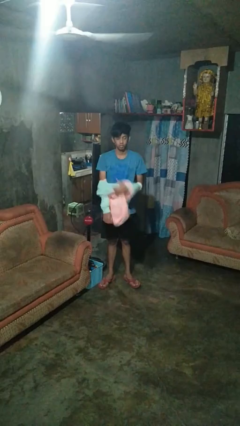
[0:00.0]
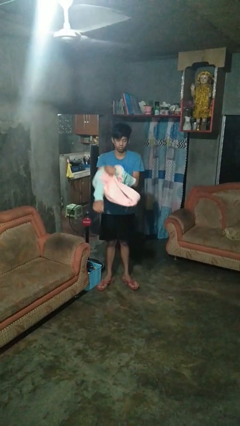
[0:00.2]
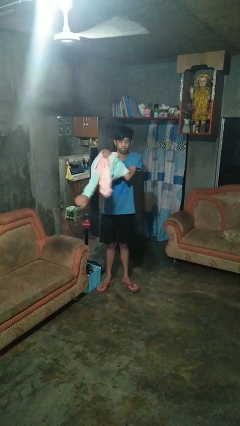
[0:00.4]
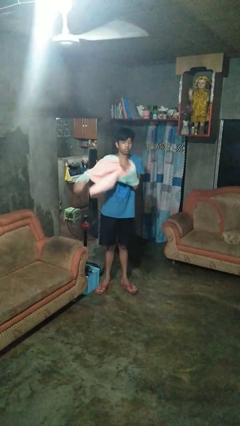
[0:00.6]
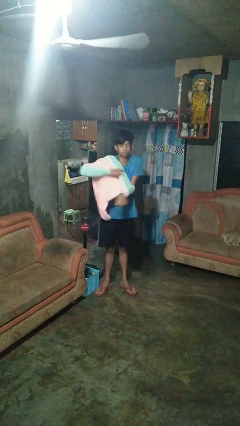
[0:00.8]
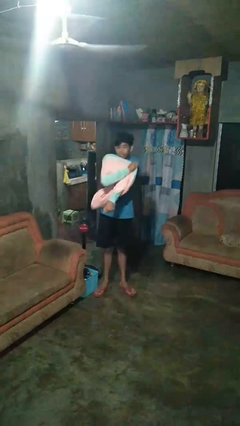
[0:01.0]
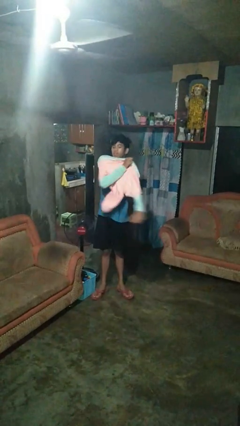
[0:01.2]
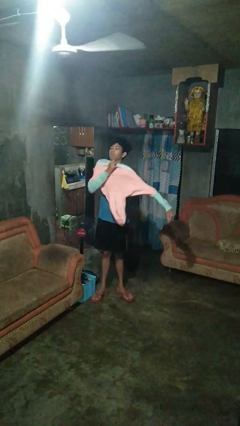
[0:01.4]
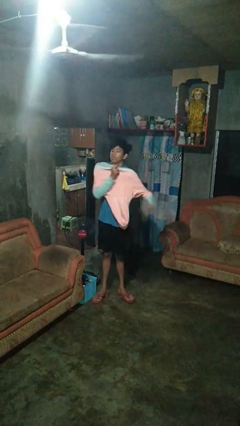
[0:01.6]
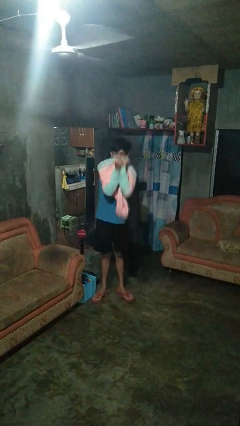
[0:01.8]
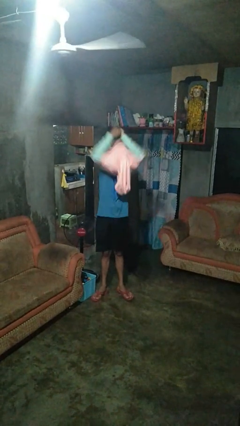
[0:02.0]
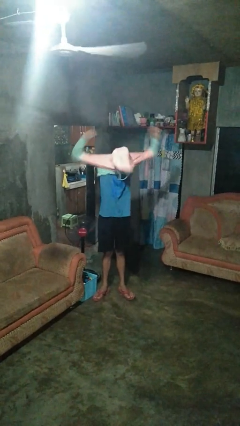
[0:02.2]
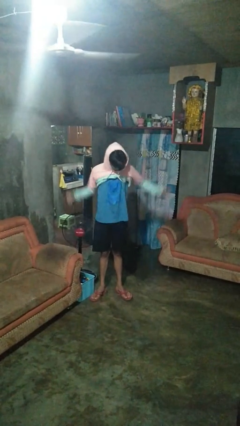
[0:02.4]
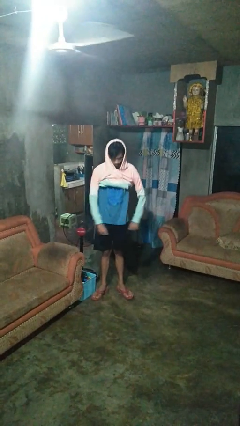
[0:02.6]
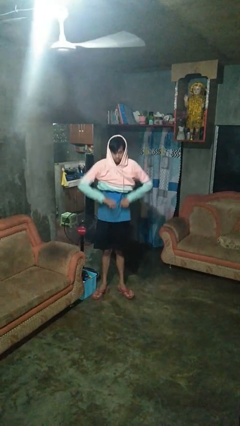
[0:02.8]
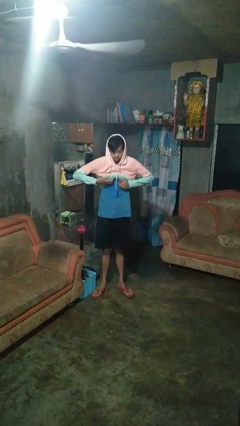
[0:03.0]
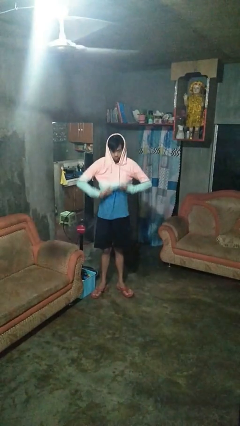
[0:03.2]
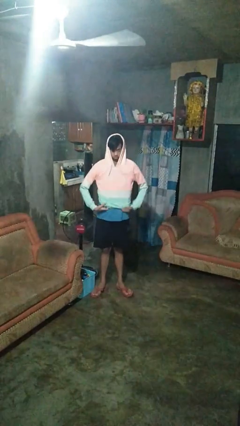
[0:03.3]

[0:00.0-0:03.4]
person puts on hoodie

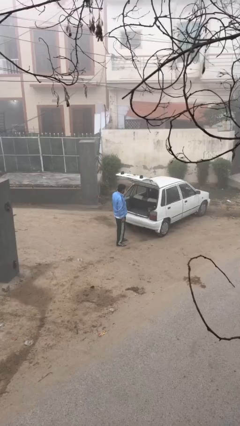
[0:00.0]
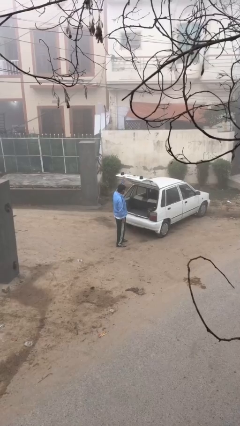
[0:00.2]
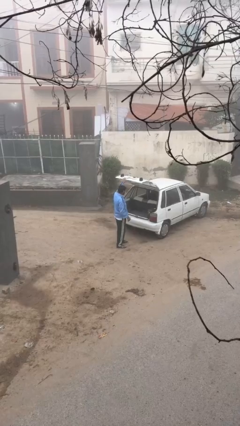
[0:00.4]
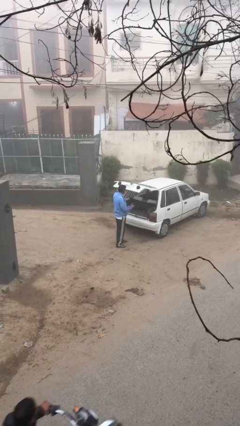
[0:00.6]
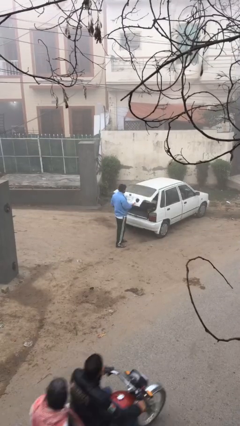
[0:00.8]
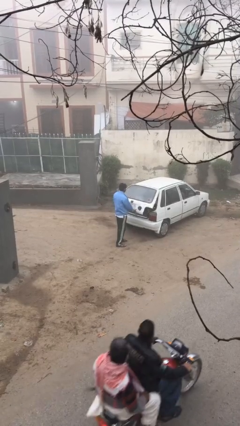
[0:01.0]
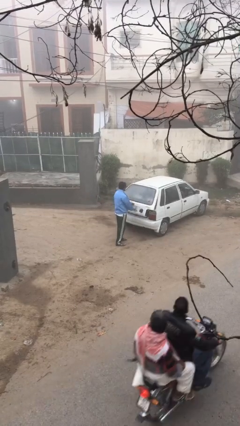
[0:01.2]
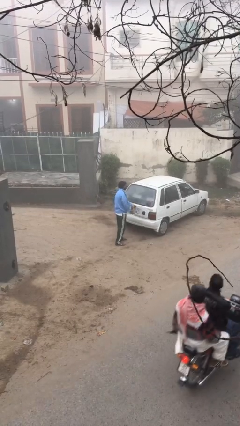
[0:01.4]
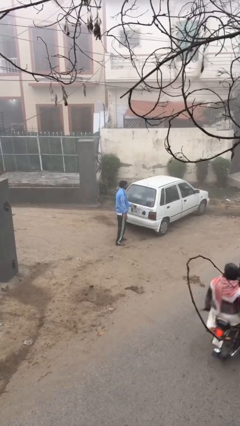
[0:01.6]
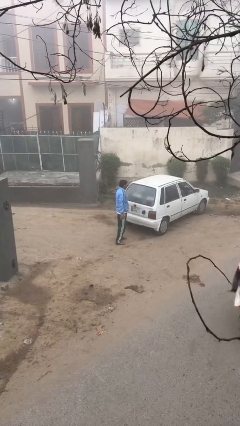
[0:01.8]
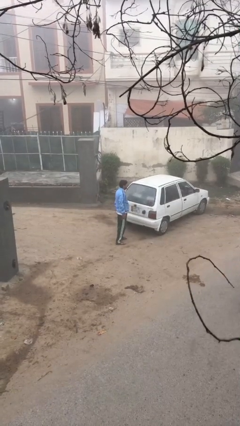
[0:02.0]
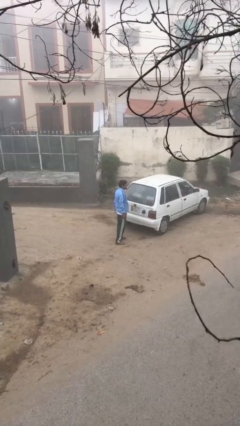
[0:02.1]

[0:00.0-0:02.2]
person closes car trunk

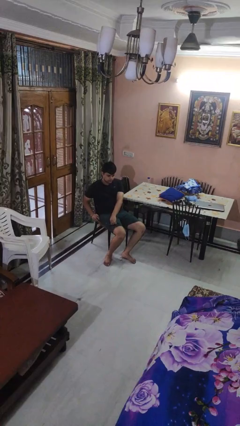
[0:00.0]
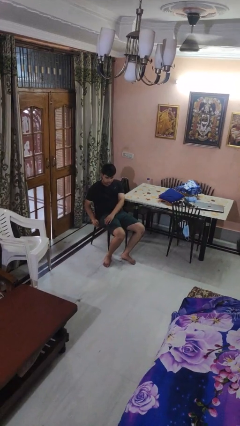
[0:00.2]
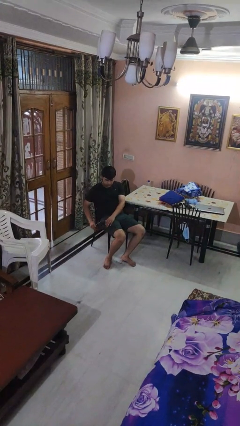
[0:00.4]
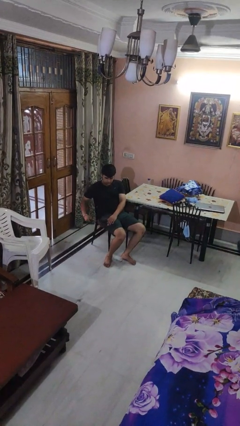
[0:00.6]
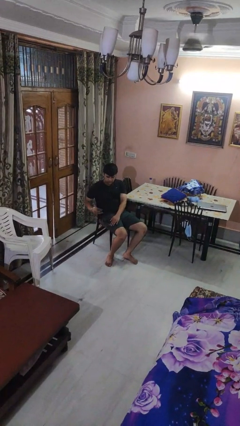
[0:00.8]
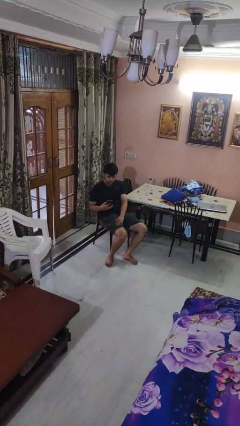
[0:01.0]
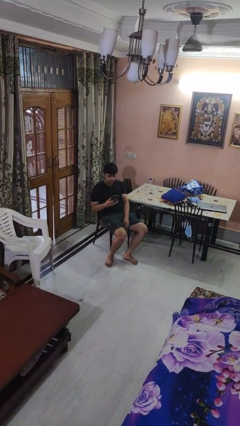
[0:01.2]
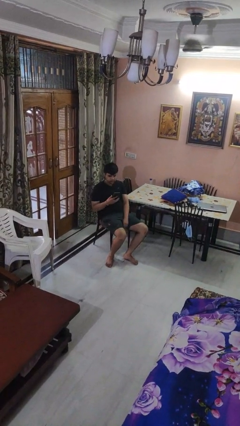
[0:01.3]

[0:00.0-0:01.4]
person takes phone from pocket

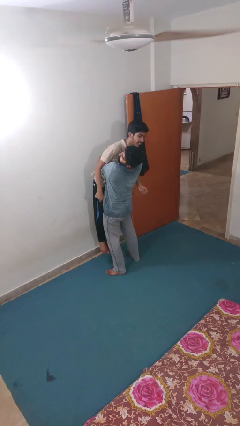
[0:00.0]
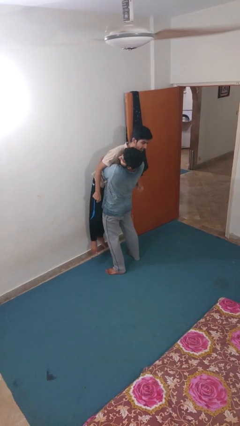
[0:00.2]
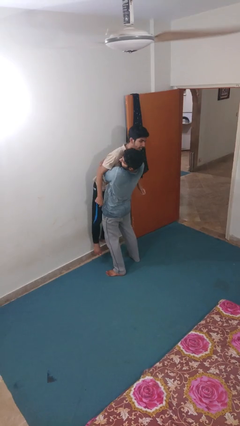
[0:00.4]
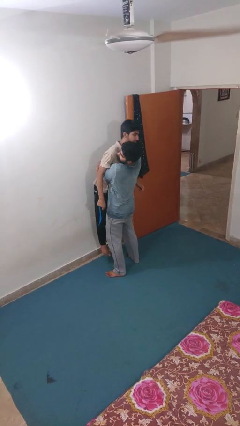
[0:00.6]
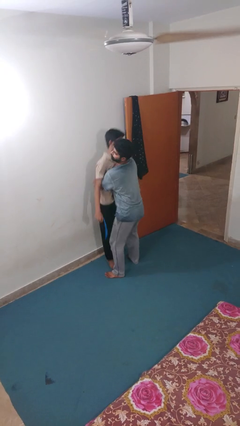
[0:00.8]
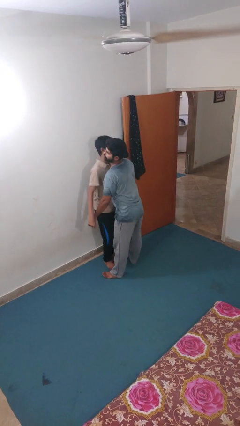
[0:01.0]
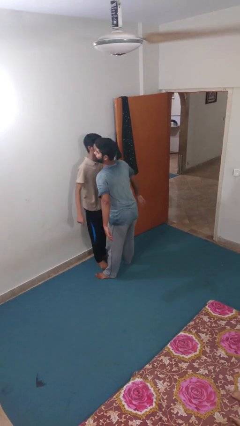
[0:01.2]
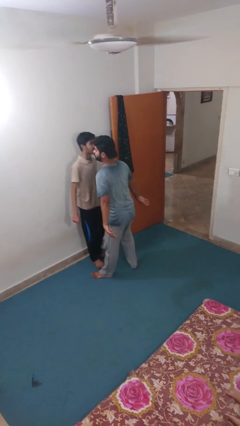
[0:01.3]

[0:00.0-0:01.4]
person puts down person

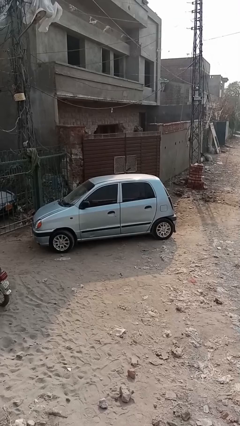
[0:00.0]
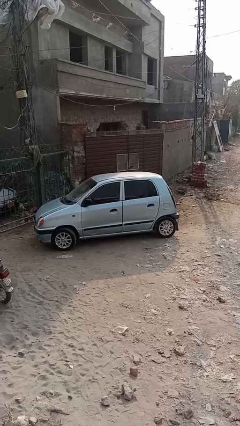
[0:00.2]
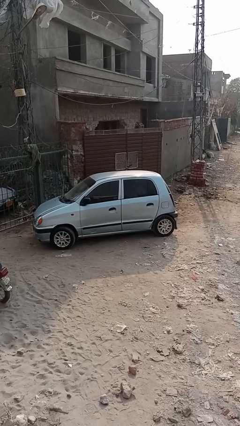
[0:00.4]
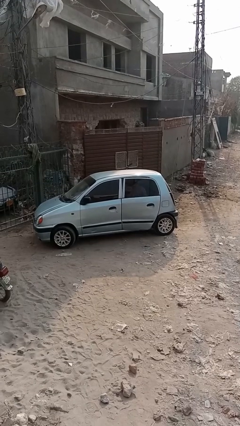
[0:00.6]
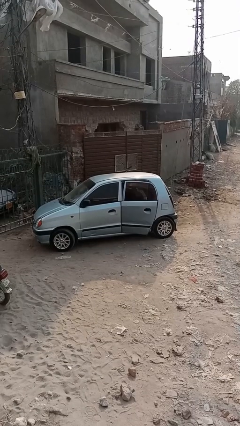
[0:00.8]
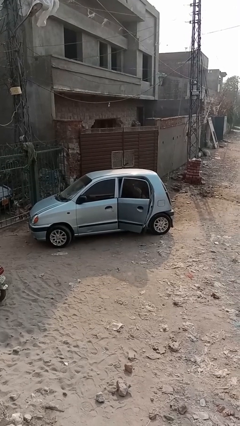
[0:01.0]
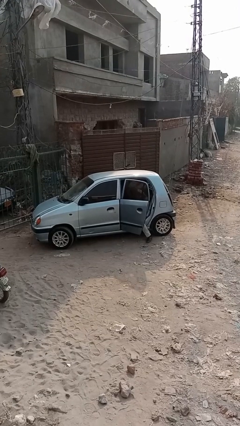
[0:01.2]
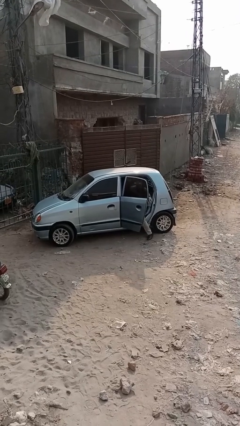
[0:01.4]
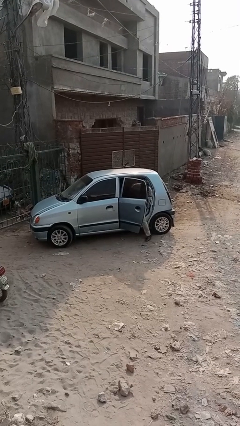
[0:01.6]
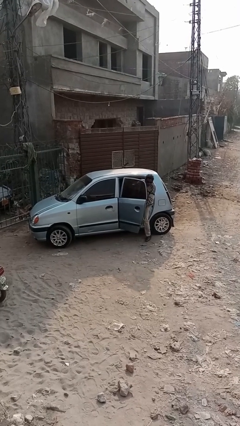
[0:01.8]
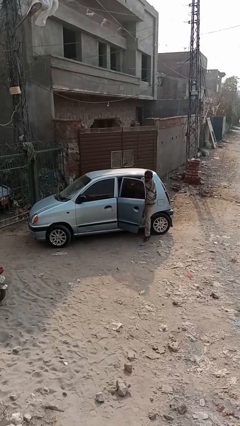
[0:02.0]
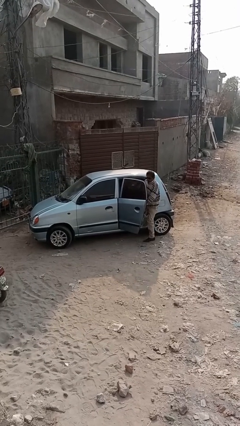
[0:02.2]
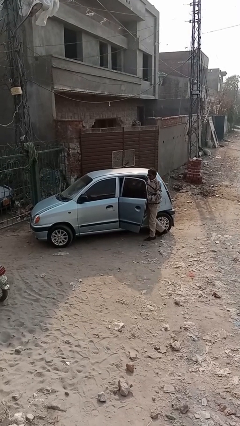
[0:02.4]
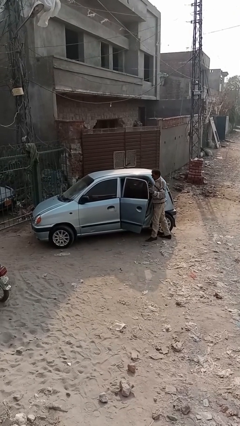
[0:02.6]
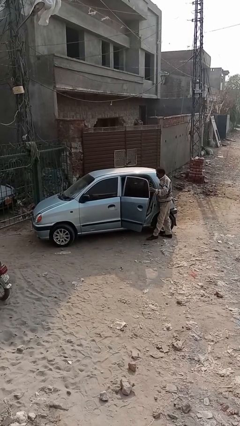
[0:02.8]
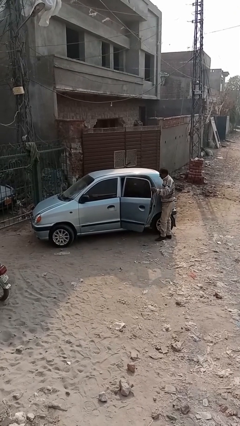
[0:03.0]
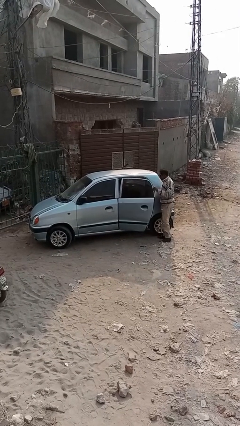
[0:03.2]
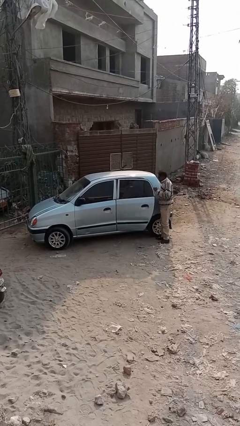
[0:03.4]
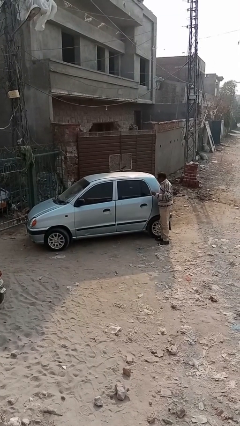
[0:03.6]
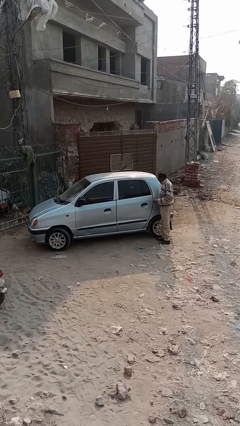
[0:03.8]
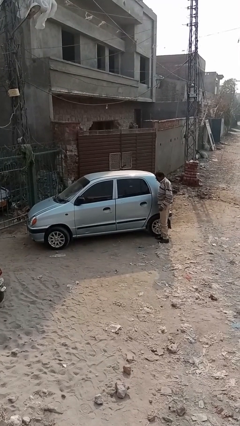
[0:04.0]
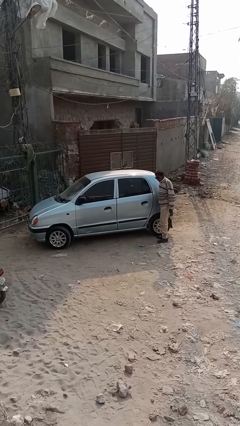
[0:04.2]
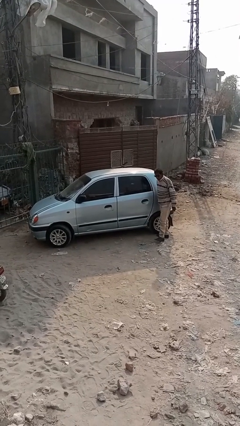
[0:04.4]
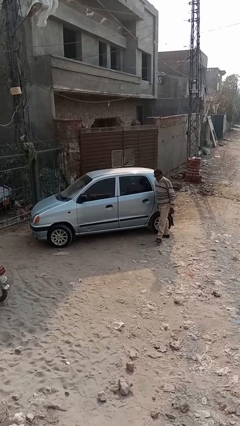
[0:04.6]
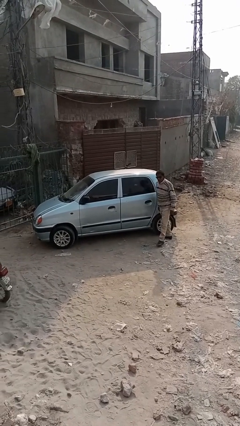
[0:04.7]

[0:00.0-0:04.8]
car drops off person

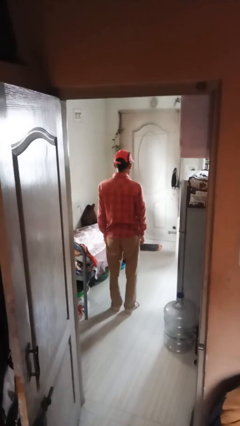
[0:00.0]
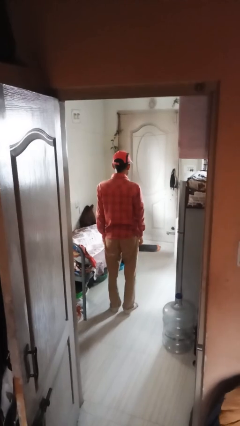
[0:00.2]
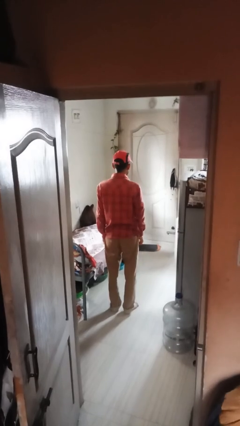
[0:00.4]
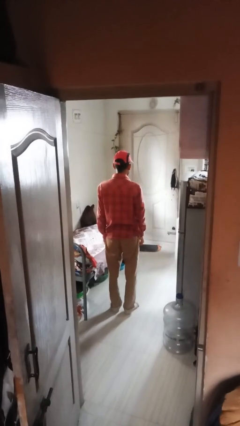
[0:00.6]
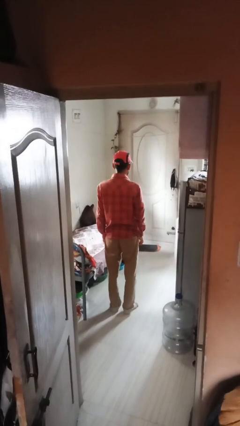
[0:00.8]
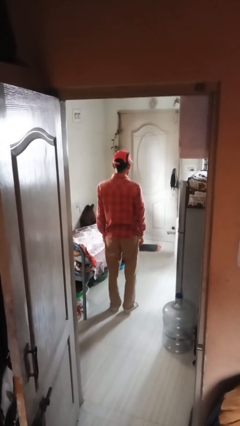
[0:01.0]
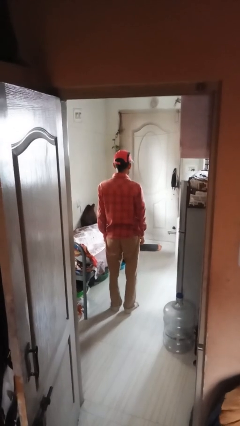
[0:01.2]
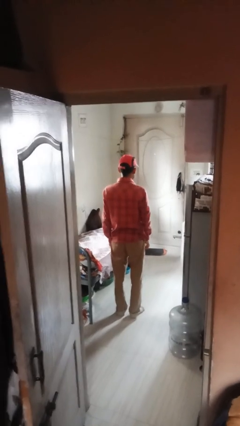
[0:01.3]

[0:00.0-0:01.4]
person gestures swipe down

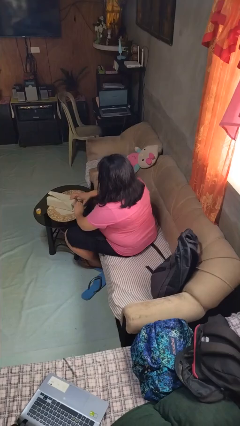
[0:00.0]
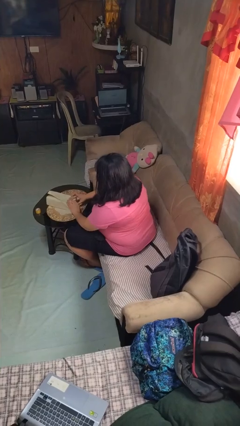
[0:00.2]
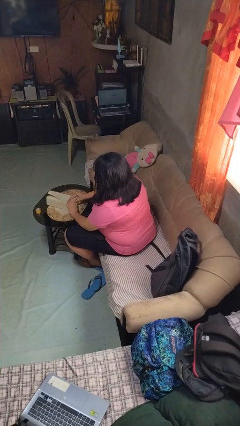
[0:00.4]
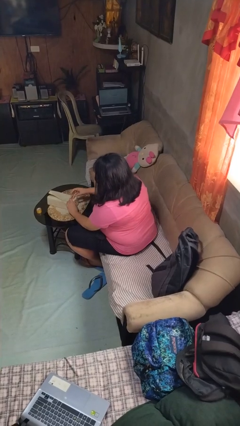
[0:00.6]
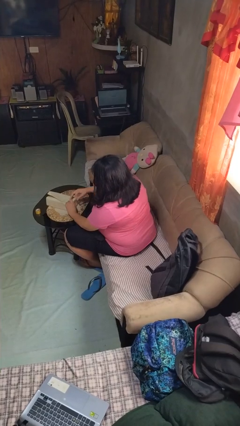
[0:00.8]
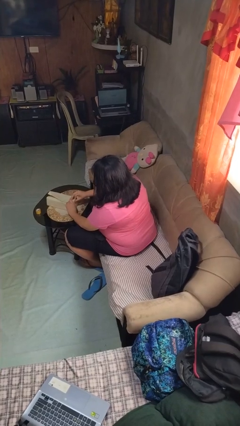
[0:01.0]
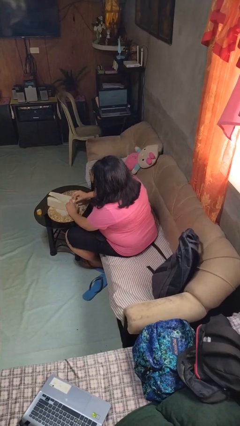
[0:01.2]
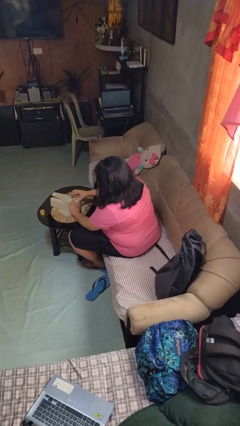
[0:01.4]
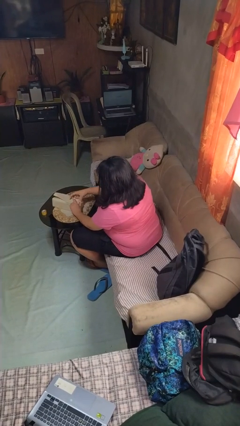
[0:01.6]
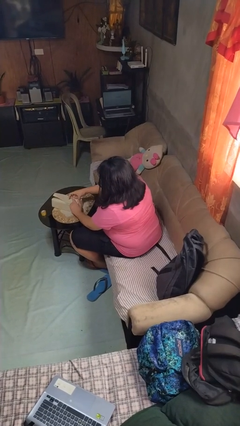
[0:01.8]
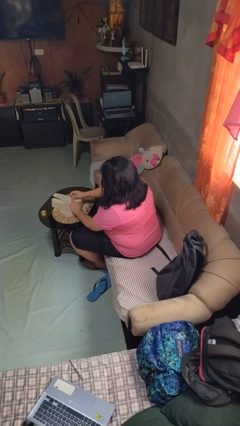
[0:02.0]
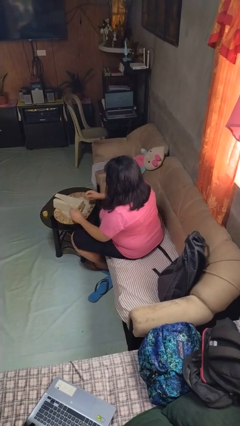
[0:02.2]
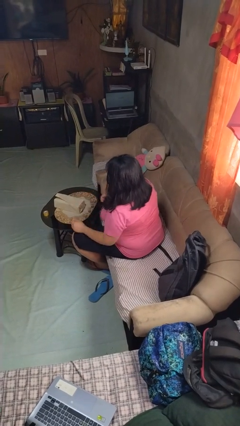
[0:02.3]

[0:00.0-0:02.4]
person wraps box
